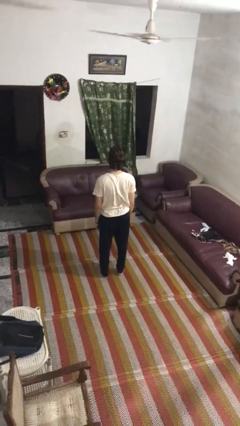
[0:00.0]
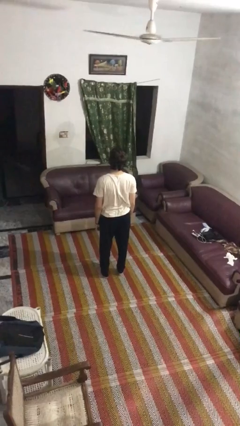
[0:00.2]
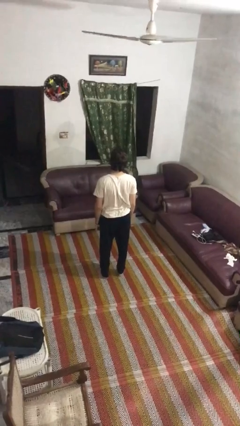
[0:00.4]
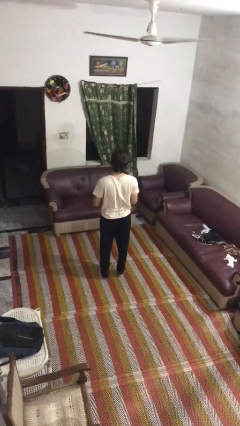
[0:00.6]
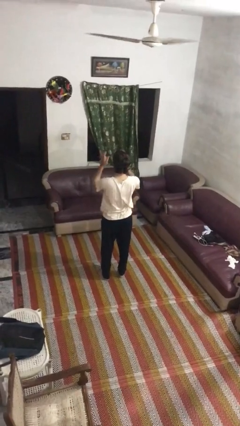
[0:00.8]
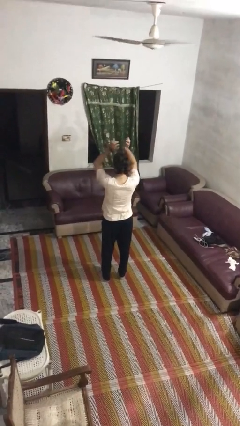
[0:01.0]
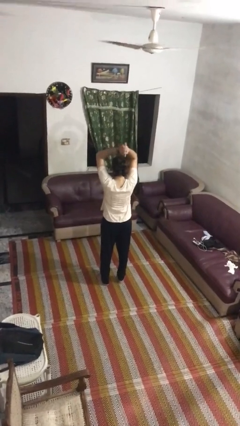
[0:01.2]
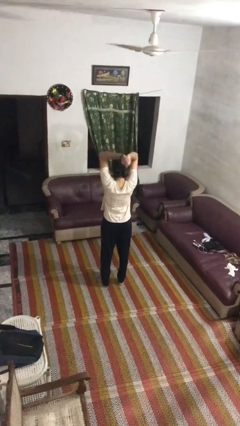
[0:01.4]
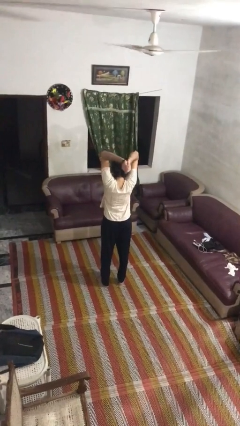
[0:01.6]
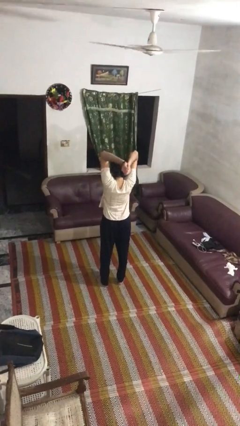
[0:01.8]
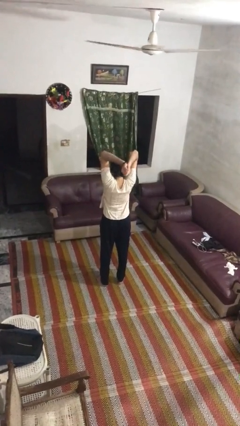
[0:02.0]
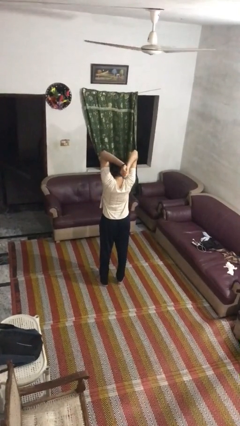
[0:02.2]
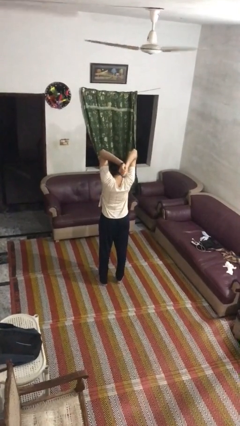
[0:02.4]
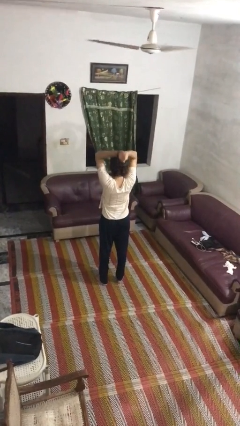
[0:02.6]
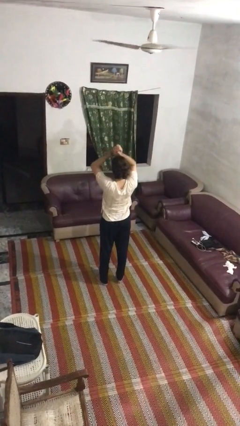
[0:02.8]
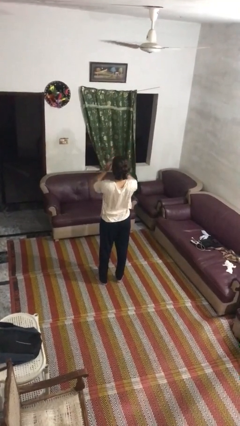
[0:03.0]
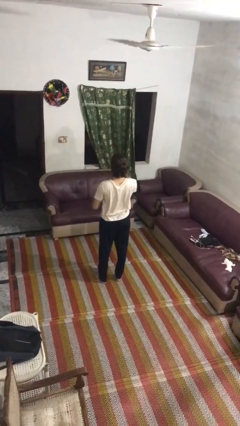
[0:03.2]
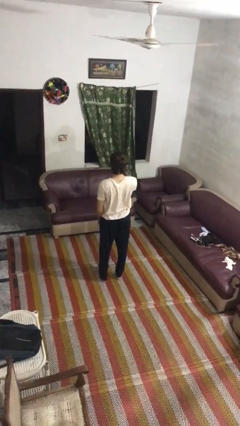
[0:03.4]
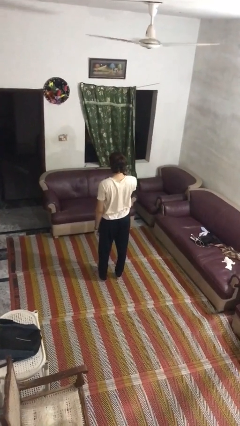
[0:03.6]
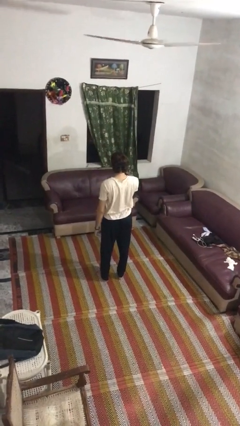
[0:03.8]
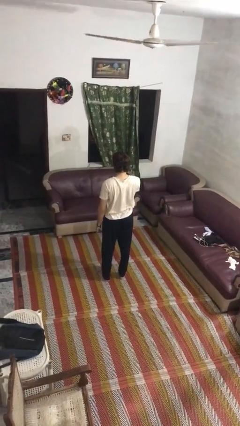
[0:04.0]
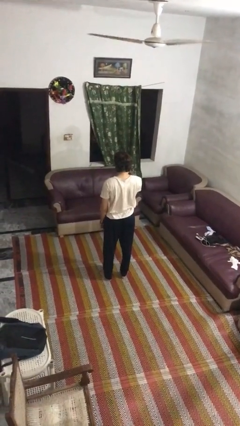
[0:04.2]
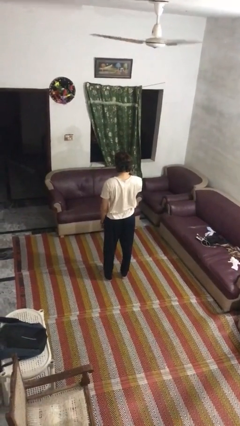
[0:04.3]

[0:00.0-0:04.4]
person stretches arms over head

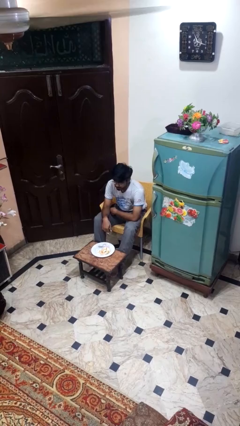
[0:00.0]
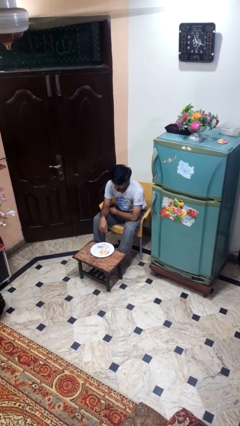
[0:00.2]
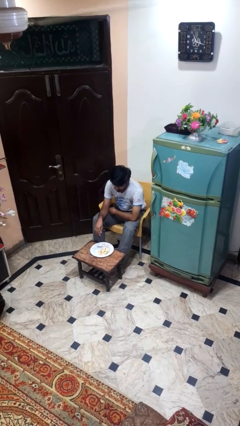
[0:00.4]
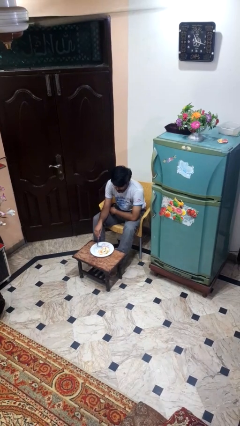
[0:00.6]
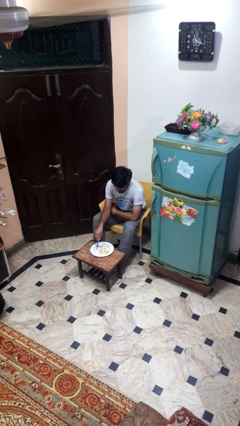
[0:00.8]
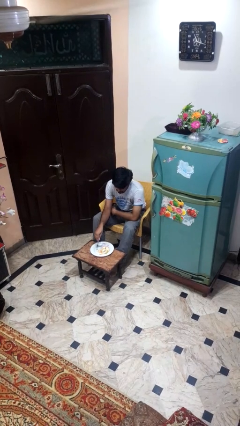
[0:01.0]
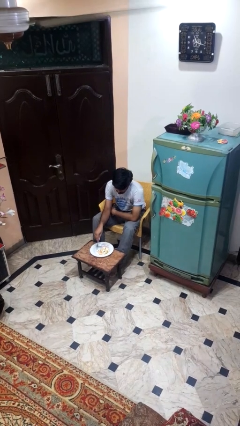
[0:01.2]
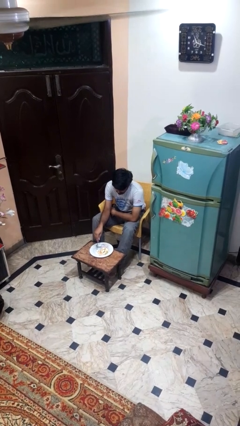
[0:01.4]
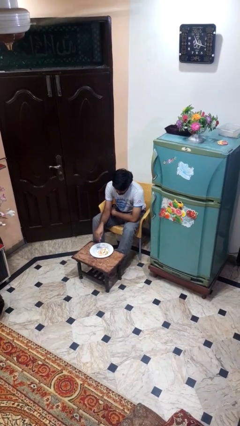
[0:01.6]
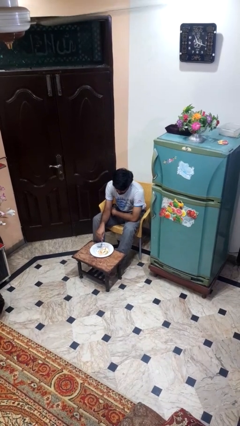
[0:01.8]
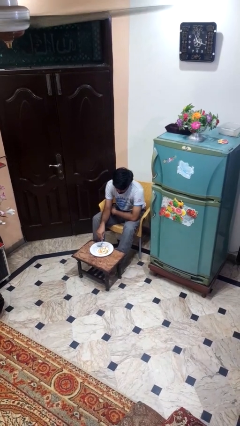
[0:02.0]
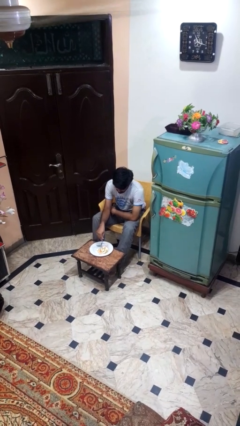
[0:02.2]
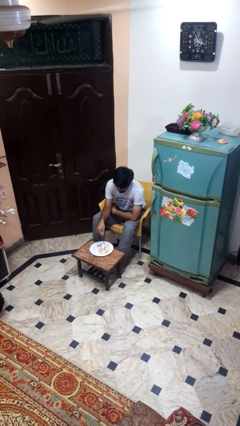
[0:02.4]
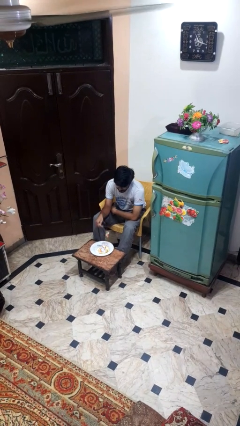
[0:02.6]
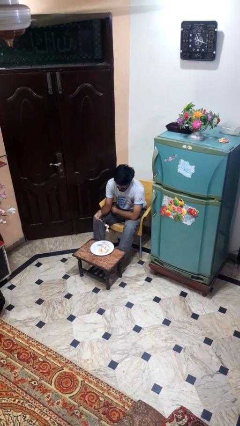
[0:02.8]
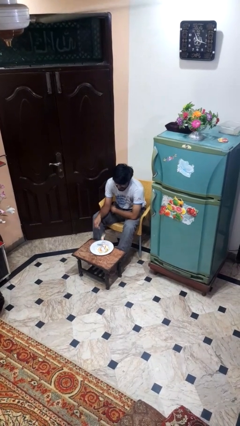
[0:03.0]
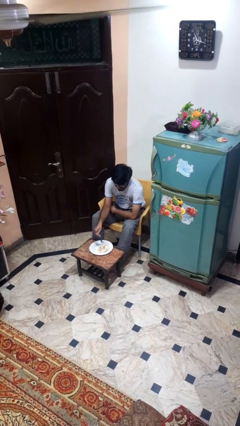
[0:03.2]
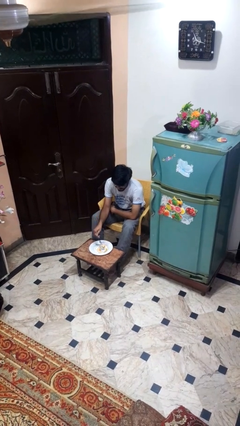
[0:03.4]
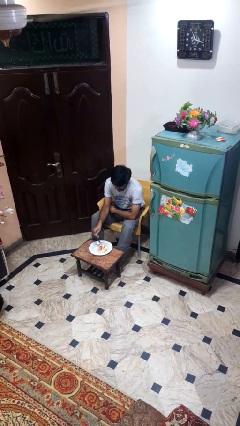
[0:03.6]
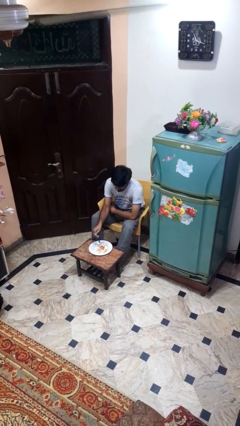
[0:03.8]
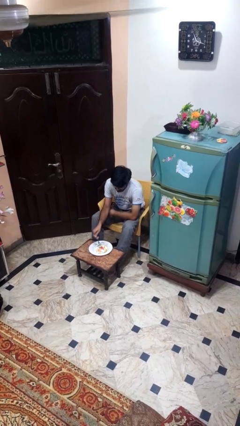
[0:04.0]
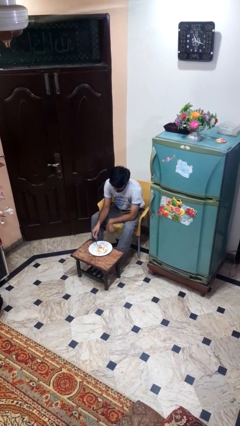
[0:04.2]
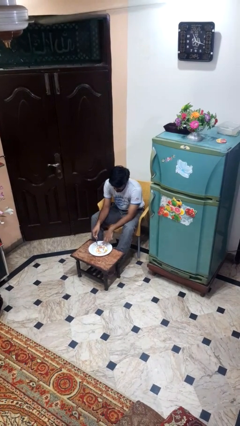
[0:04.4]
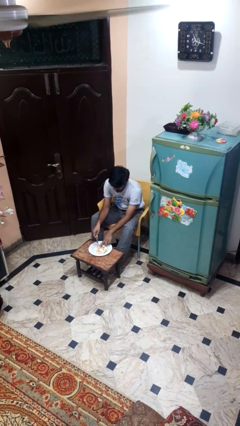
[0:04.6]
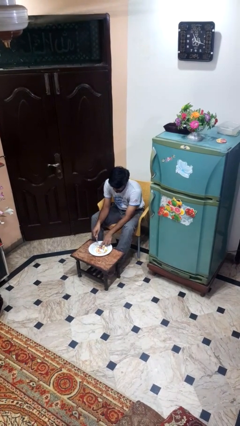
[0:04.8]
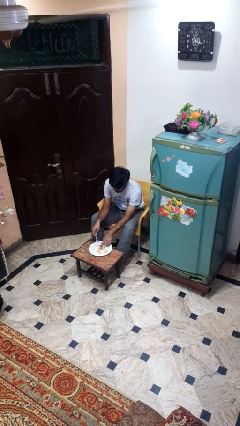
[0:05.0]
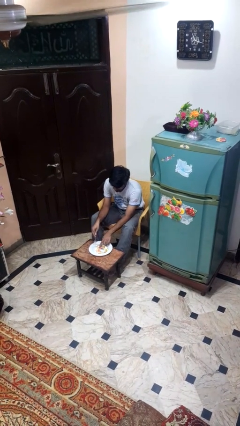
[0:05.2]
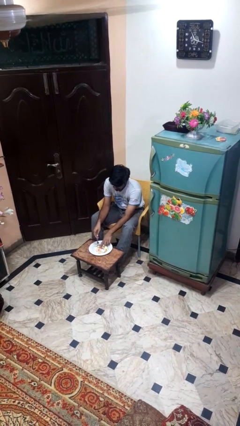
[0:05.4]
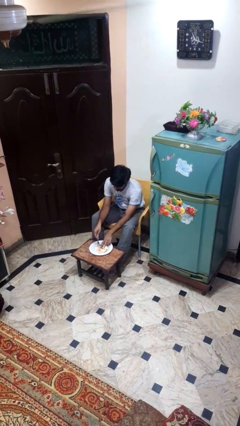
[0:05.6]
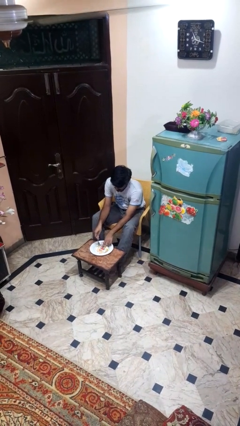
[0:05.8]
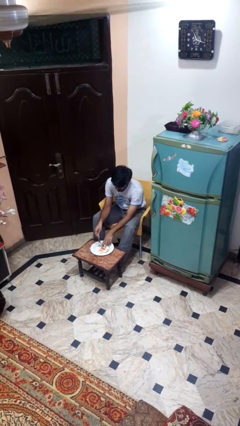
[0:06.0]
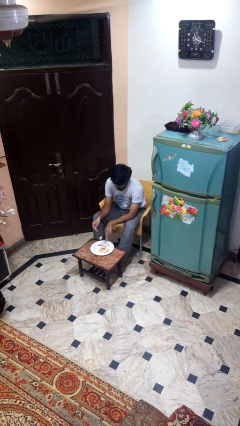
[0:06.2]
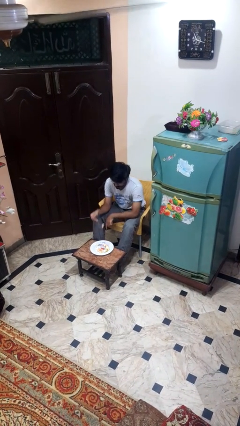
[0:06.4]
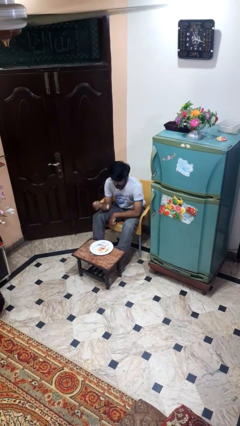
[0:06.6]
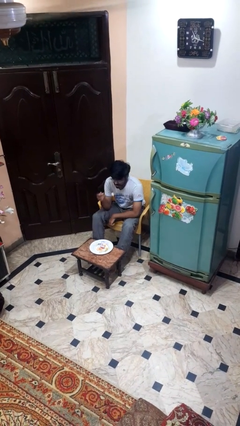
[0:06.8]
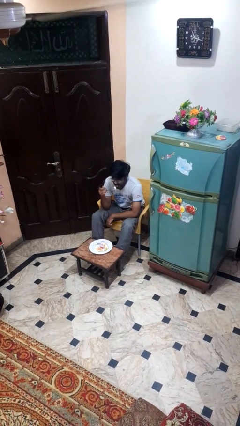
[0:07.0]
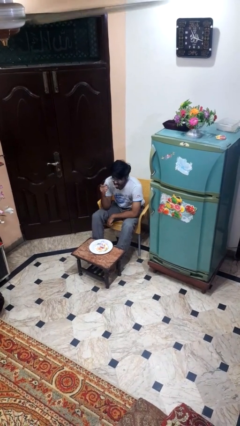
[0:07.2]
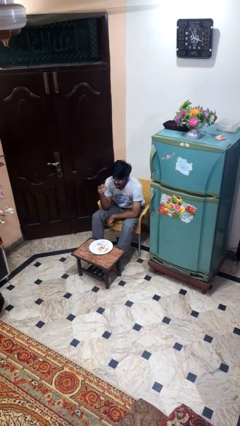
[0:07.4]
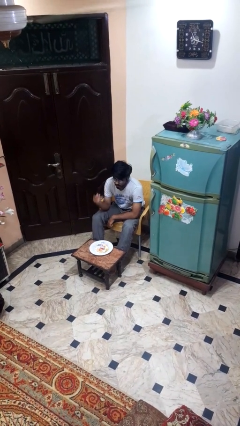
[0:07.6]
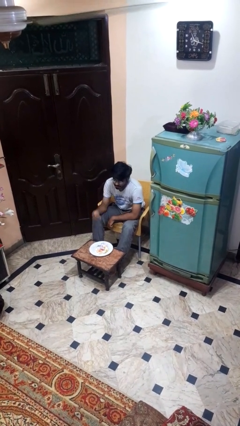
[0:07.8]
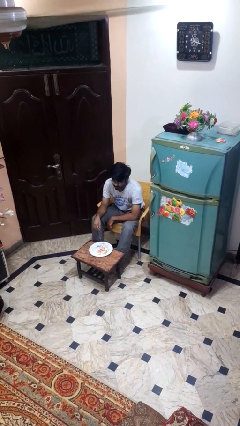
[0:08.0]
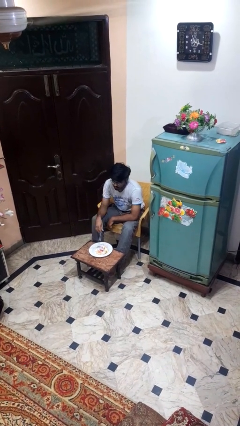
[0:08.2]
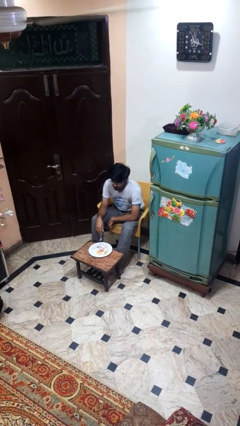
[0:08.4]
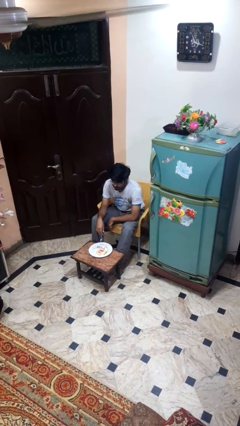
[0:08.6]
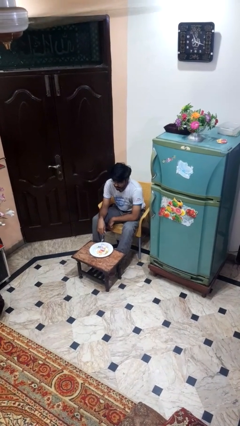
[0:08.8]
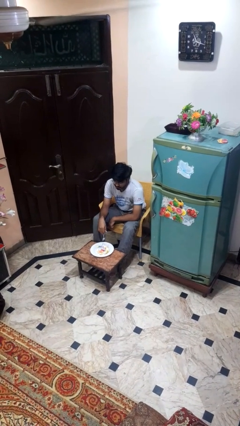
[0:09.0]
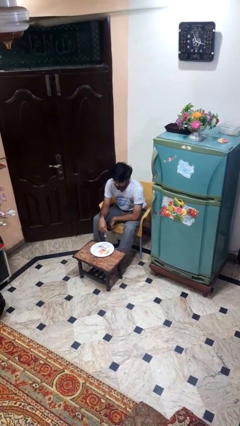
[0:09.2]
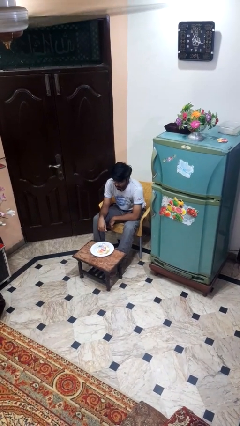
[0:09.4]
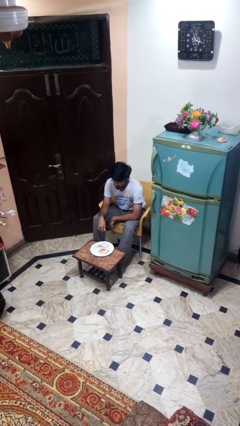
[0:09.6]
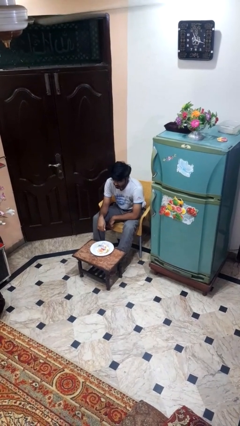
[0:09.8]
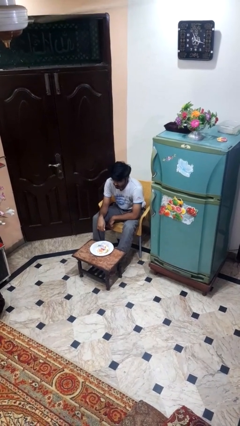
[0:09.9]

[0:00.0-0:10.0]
person eats with utensil

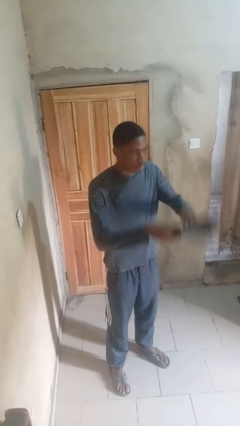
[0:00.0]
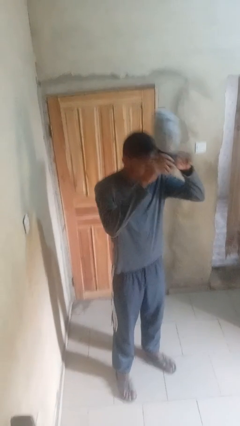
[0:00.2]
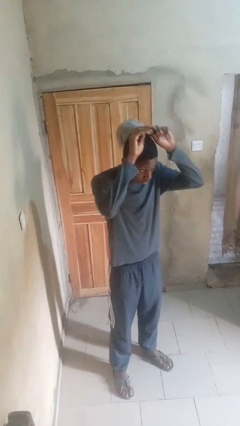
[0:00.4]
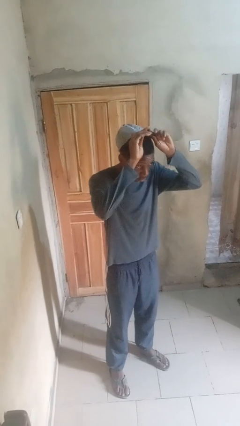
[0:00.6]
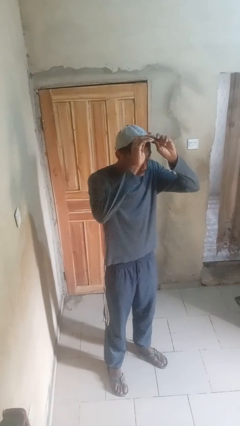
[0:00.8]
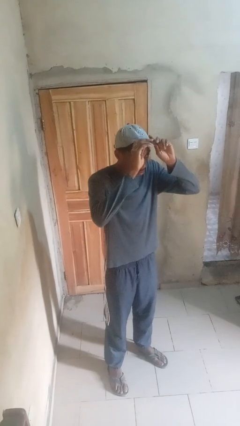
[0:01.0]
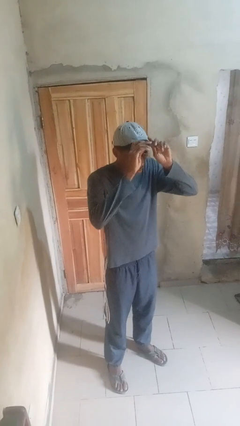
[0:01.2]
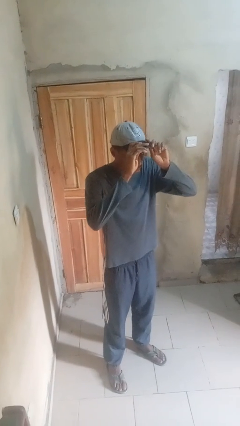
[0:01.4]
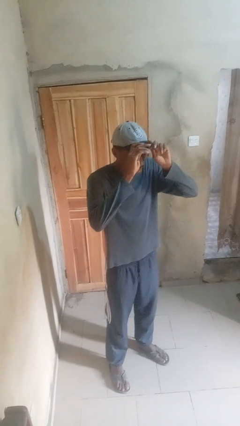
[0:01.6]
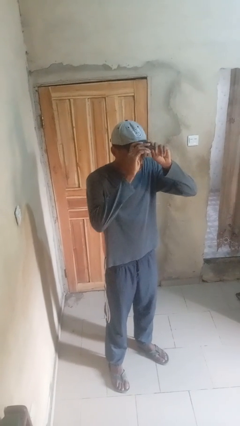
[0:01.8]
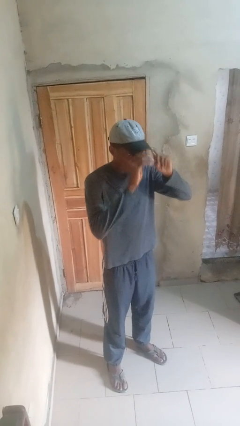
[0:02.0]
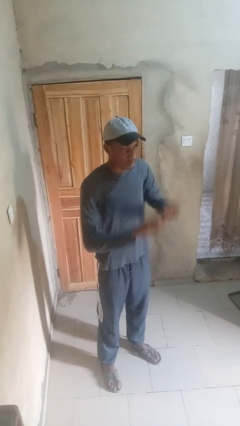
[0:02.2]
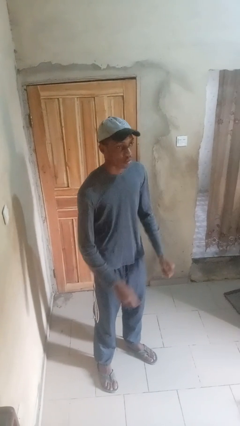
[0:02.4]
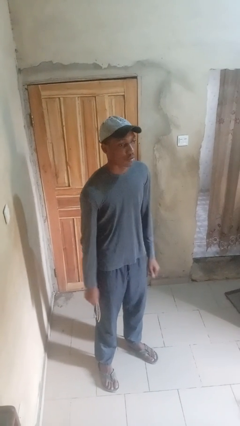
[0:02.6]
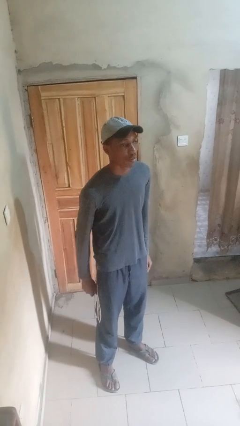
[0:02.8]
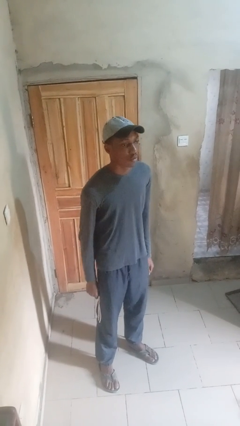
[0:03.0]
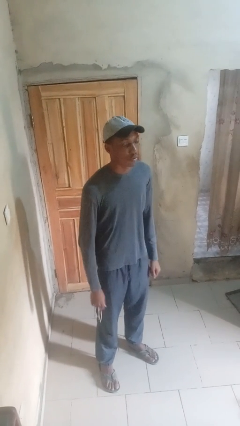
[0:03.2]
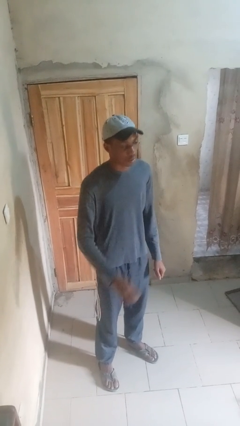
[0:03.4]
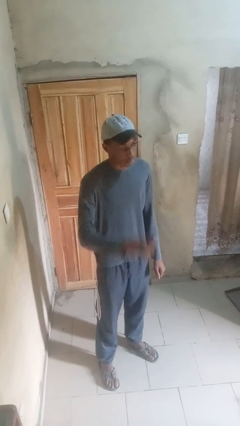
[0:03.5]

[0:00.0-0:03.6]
person puts on hat

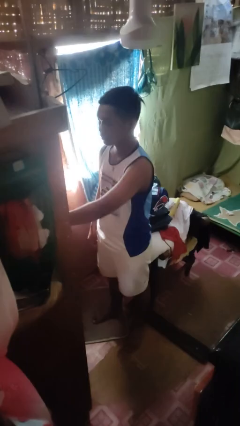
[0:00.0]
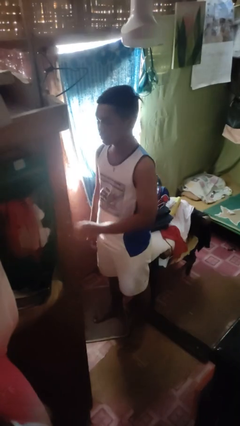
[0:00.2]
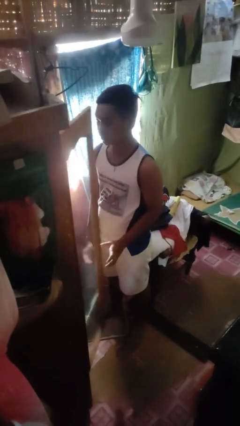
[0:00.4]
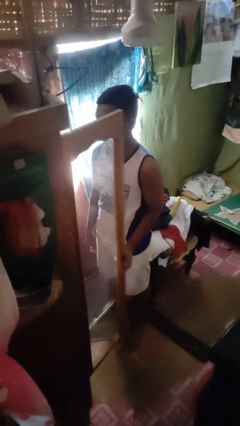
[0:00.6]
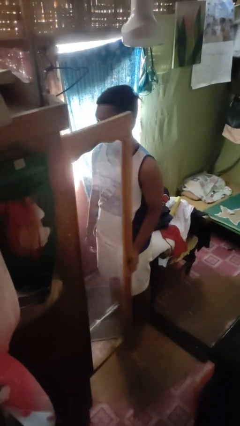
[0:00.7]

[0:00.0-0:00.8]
person opens closet door
